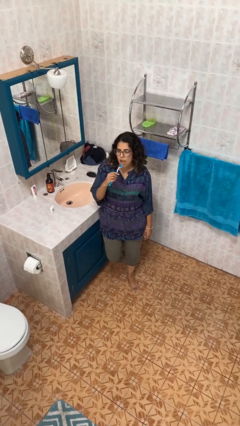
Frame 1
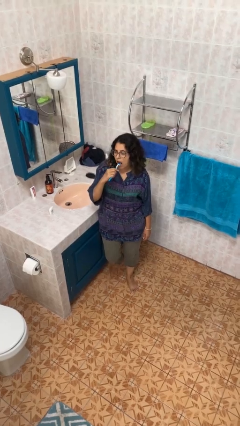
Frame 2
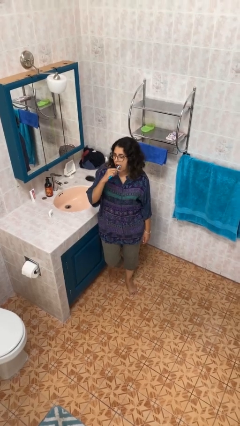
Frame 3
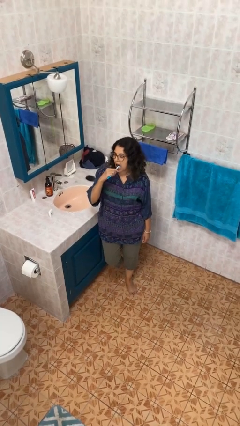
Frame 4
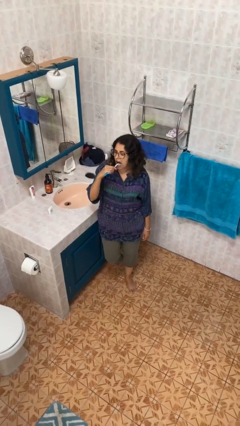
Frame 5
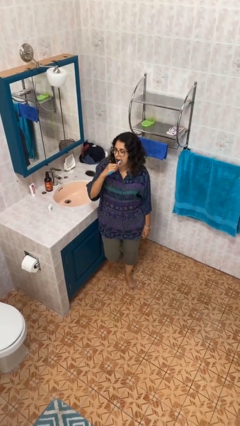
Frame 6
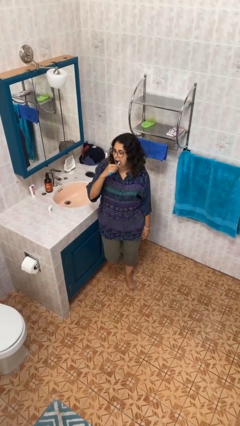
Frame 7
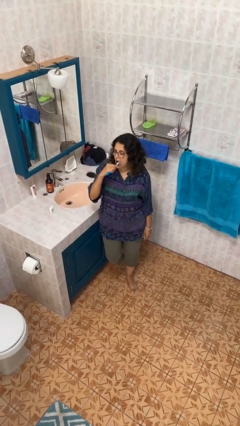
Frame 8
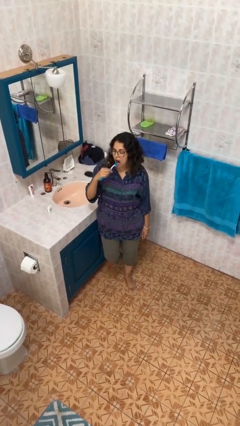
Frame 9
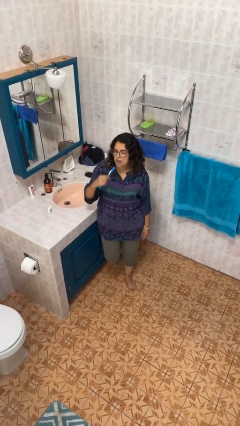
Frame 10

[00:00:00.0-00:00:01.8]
person brushes teeth

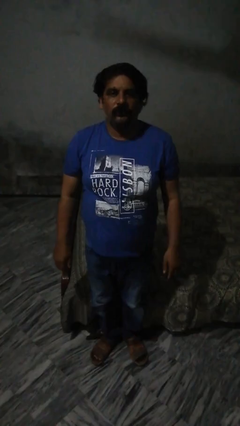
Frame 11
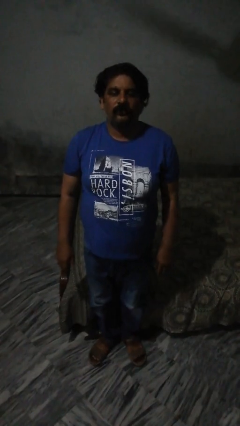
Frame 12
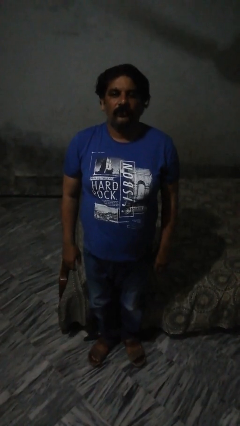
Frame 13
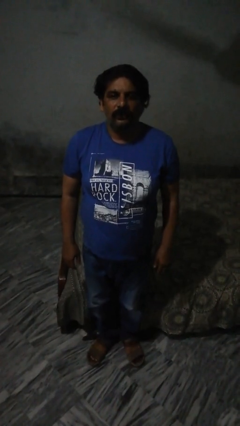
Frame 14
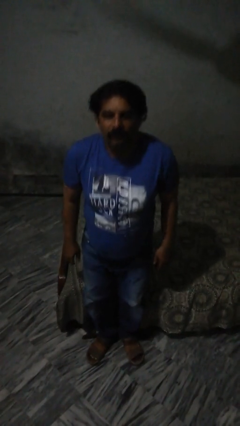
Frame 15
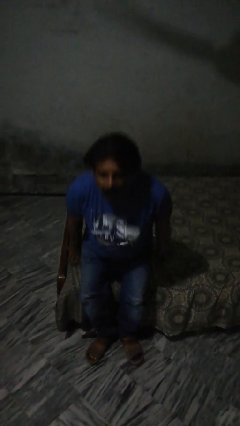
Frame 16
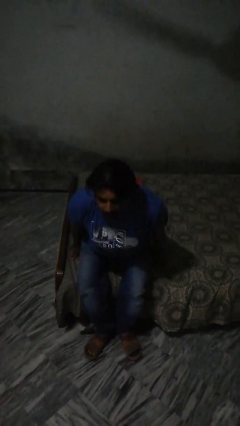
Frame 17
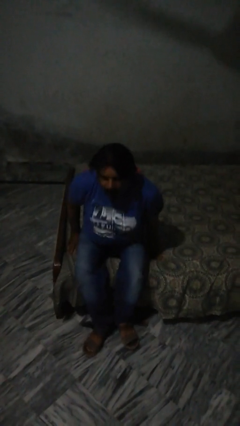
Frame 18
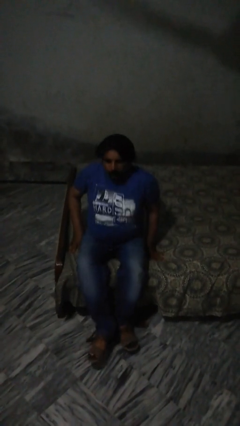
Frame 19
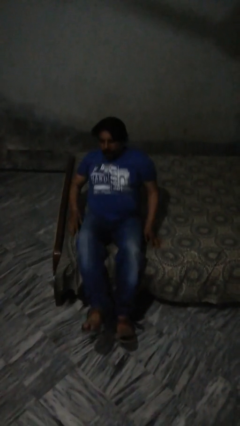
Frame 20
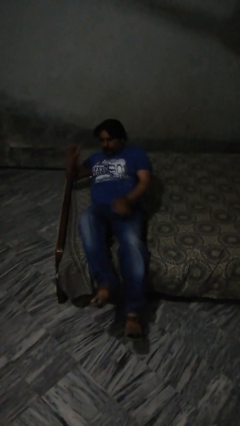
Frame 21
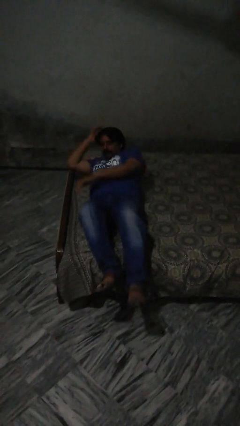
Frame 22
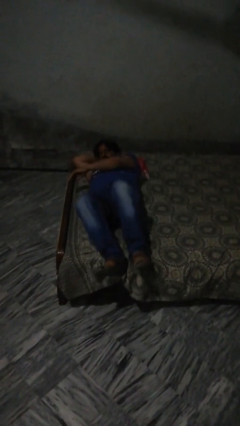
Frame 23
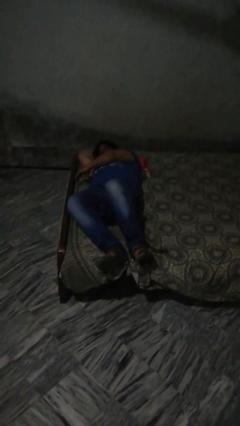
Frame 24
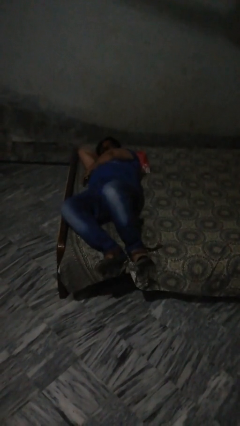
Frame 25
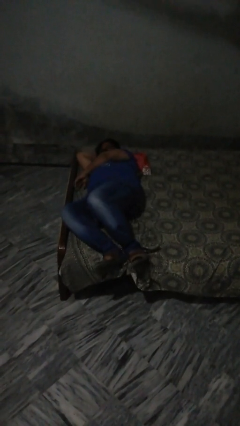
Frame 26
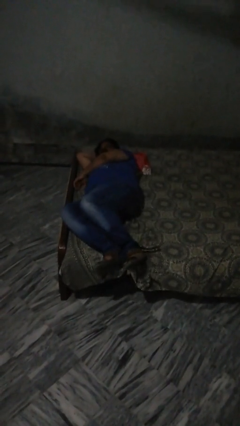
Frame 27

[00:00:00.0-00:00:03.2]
person lies down on bed

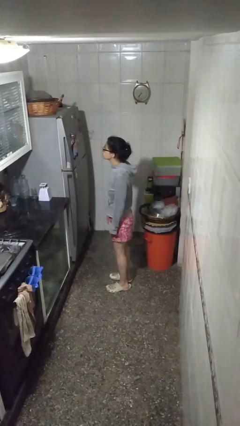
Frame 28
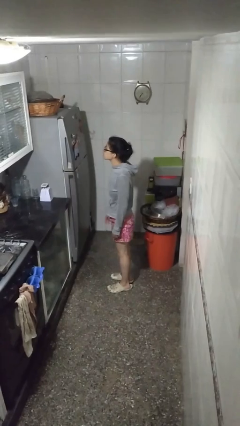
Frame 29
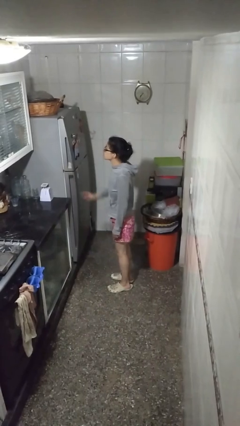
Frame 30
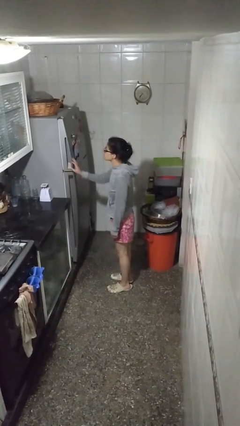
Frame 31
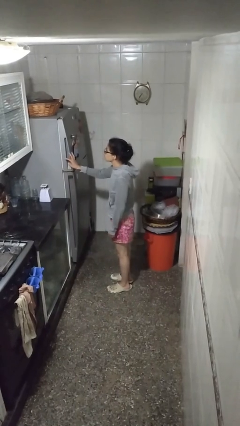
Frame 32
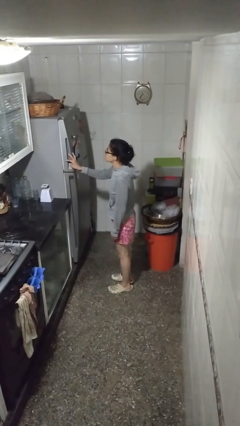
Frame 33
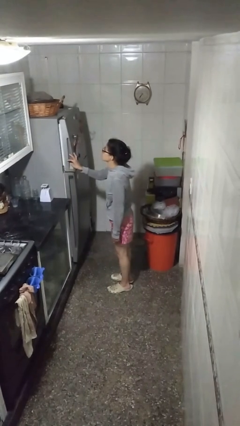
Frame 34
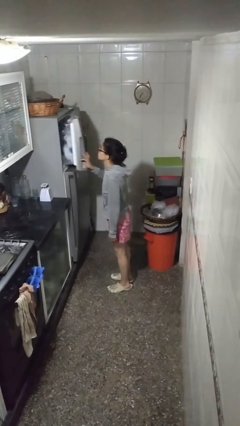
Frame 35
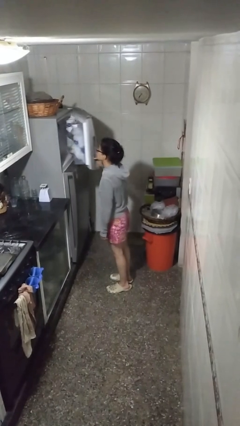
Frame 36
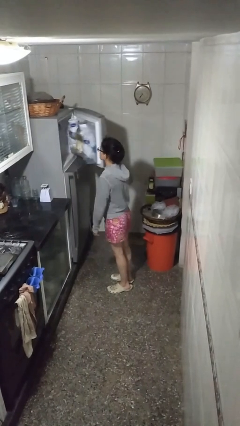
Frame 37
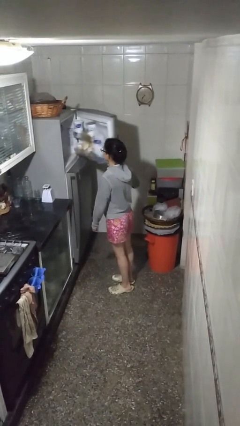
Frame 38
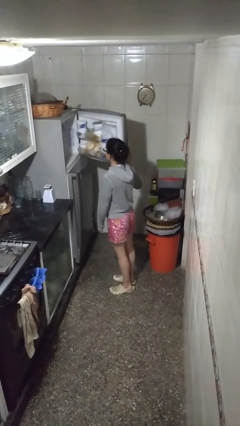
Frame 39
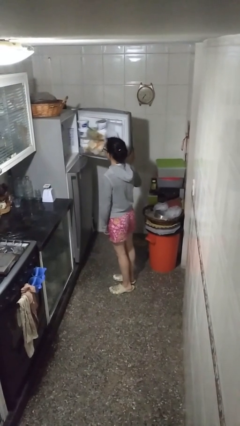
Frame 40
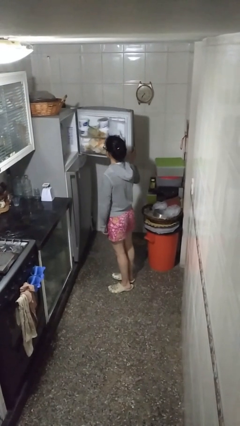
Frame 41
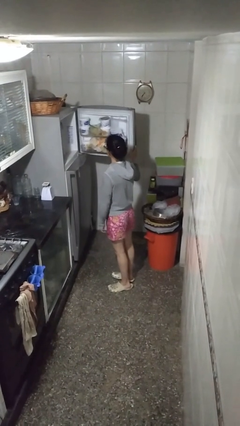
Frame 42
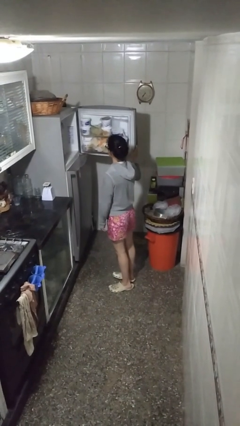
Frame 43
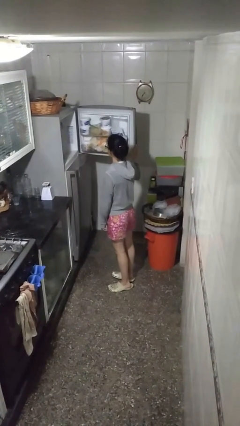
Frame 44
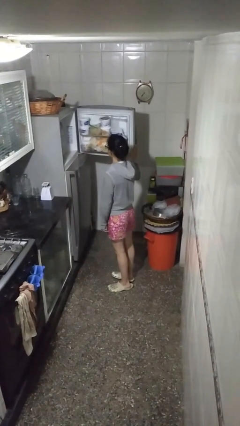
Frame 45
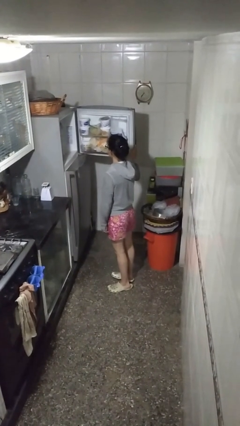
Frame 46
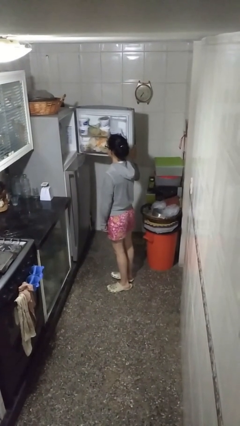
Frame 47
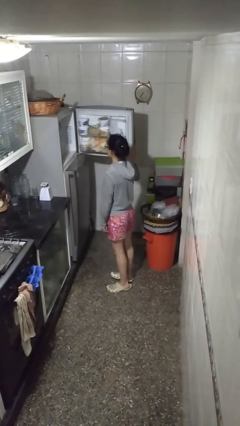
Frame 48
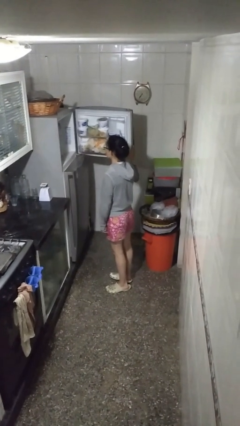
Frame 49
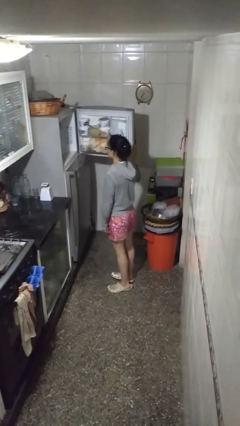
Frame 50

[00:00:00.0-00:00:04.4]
person opens refrigerator

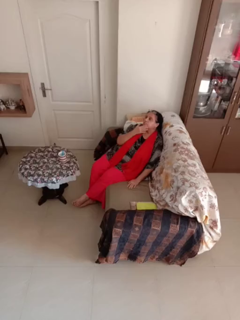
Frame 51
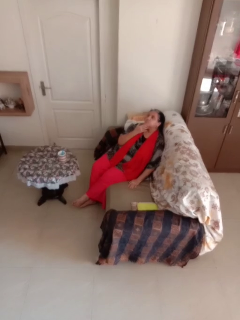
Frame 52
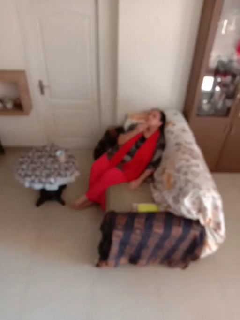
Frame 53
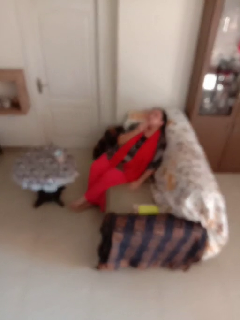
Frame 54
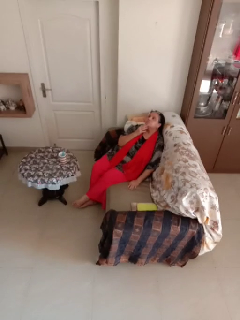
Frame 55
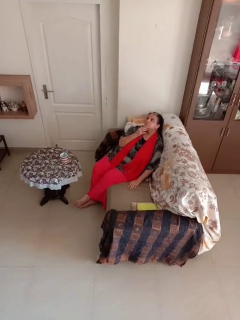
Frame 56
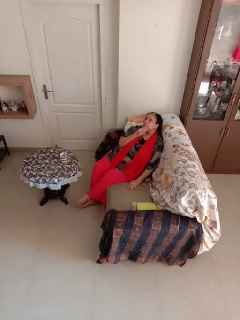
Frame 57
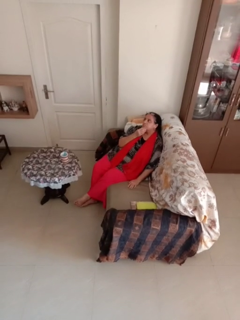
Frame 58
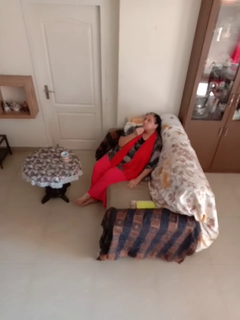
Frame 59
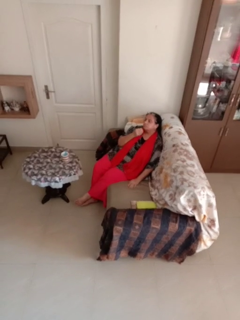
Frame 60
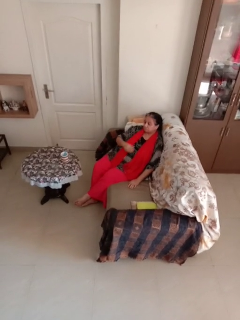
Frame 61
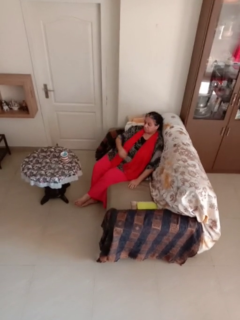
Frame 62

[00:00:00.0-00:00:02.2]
person strokes chin

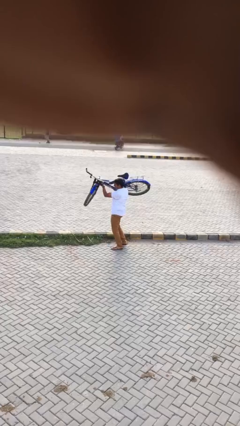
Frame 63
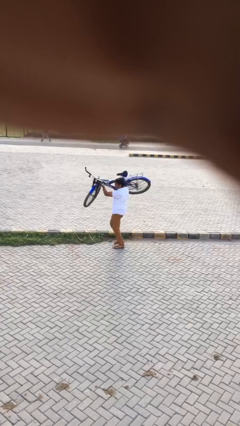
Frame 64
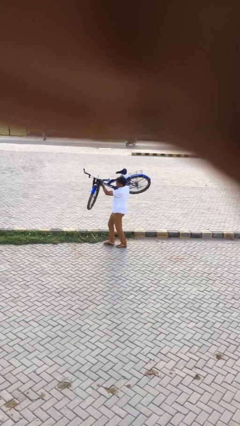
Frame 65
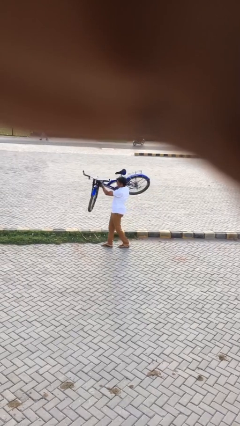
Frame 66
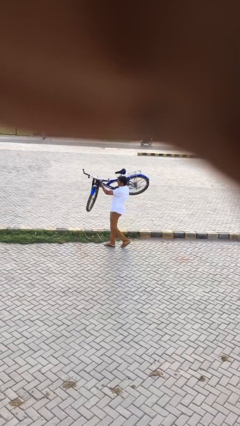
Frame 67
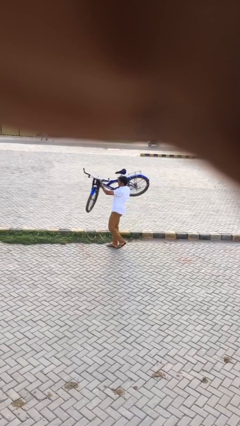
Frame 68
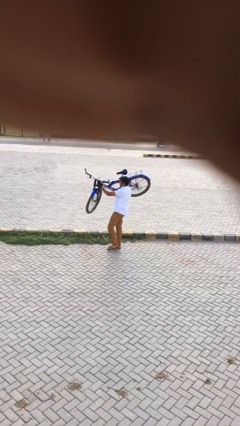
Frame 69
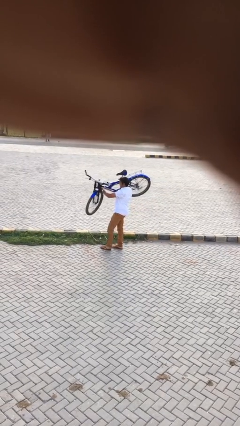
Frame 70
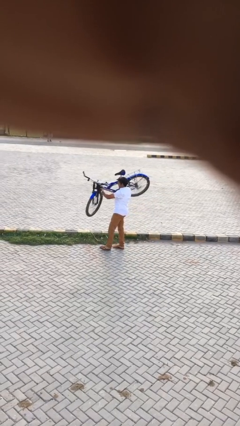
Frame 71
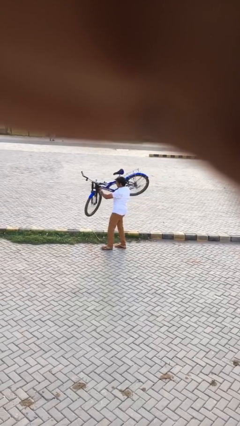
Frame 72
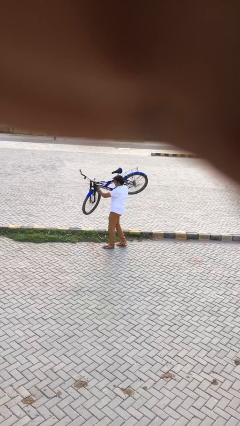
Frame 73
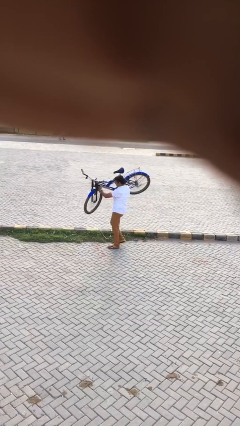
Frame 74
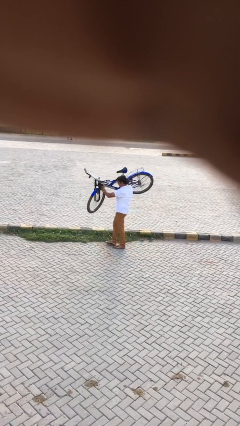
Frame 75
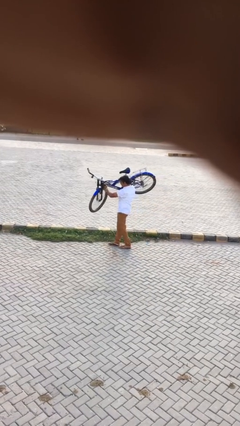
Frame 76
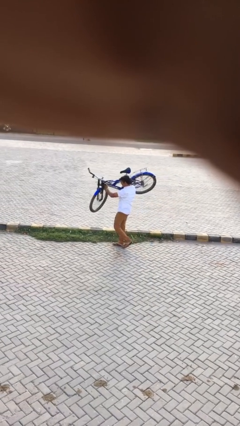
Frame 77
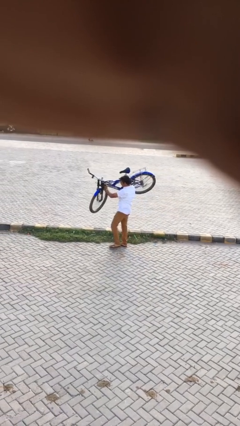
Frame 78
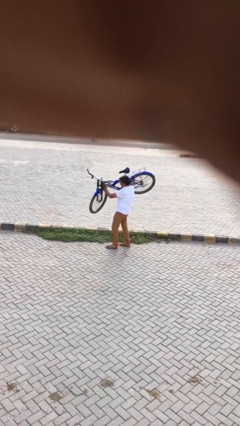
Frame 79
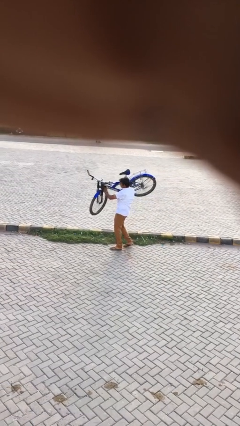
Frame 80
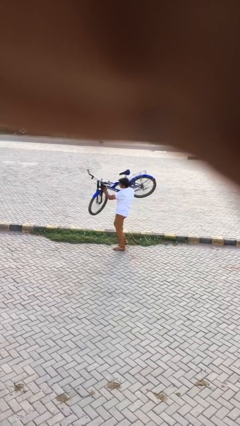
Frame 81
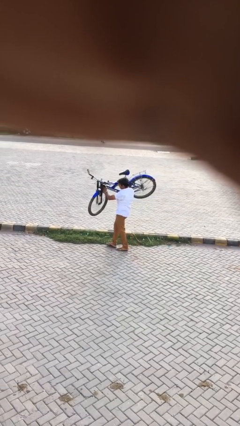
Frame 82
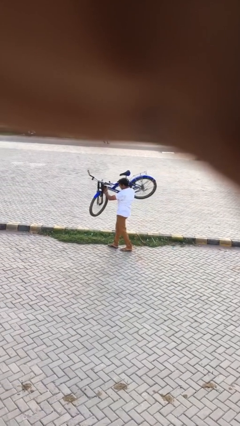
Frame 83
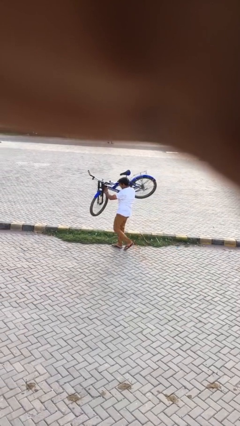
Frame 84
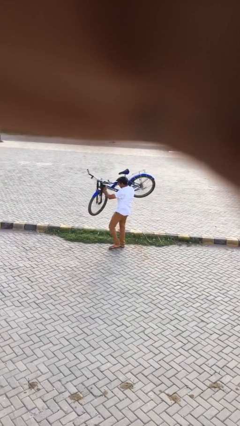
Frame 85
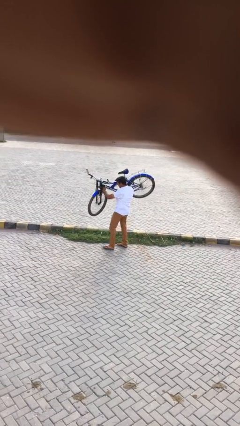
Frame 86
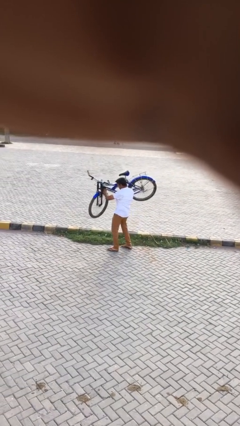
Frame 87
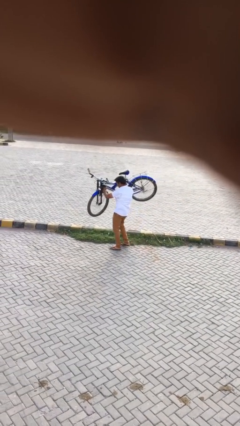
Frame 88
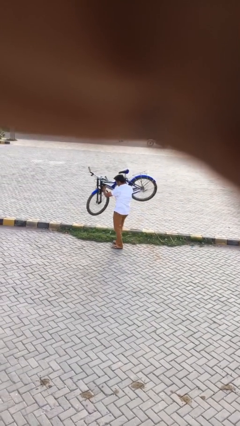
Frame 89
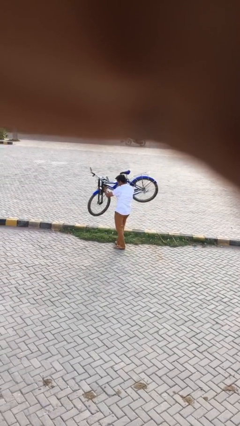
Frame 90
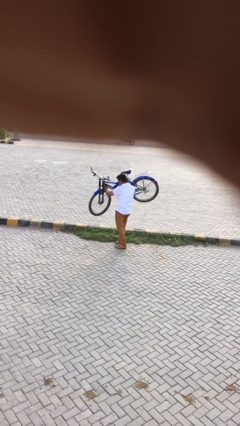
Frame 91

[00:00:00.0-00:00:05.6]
person carries heavy object

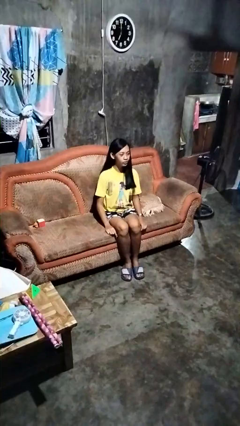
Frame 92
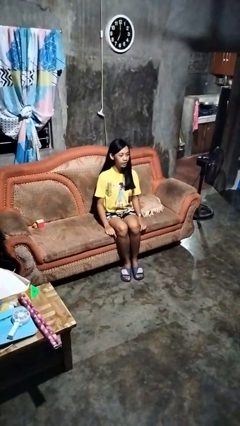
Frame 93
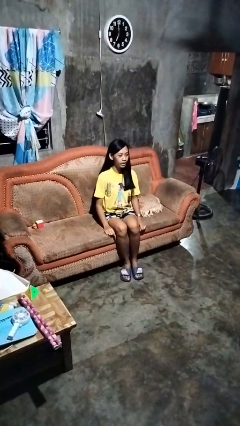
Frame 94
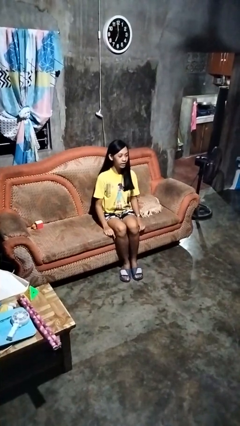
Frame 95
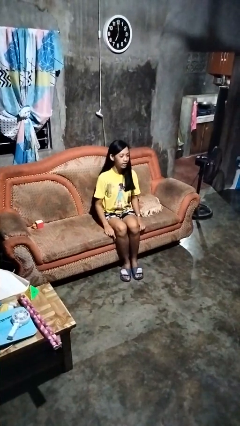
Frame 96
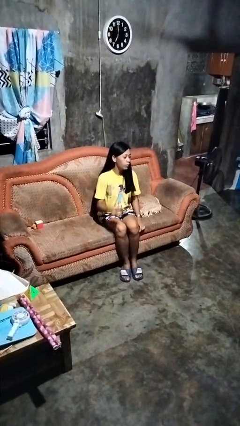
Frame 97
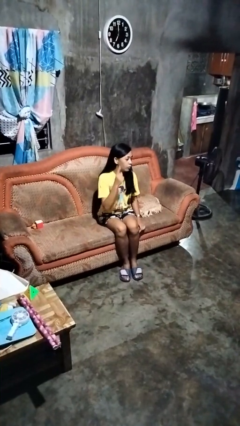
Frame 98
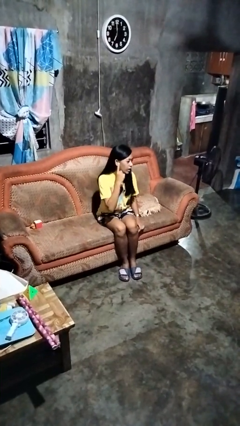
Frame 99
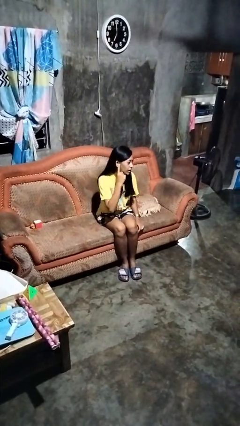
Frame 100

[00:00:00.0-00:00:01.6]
person gestures listen closely
